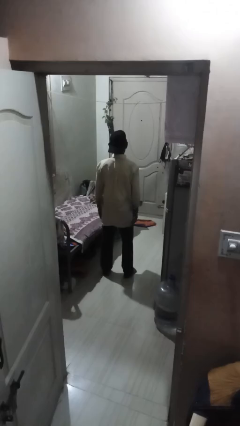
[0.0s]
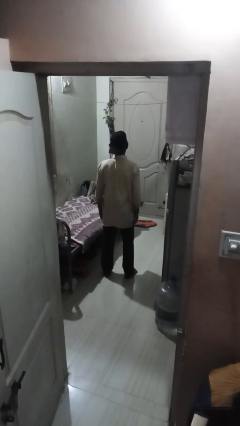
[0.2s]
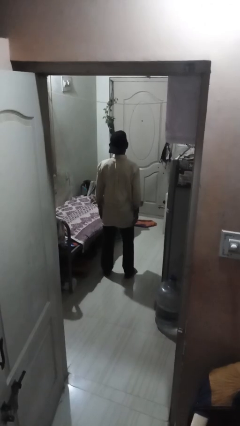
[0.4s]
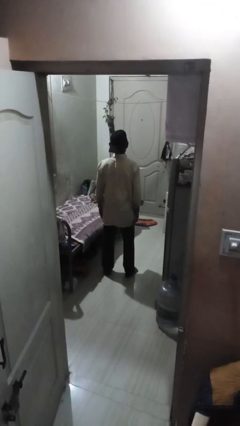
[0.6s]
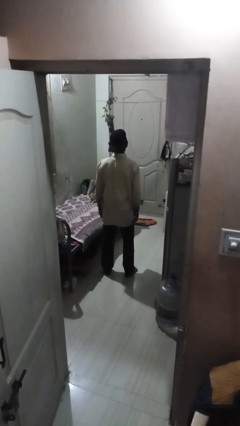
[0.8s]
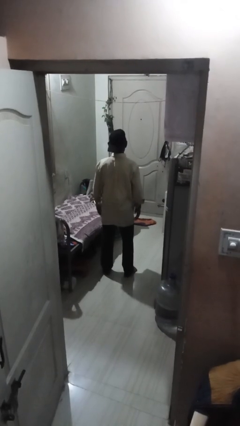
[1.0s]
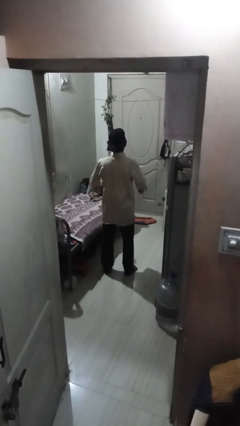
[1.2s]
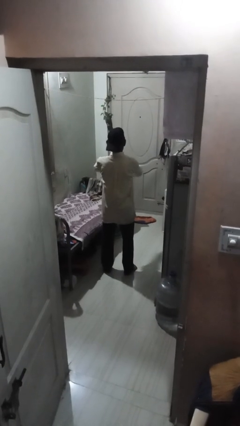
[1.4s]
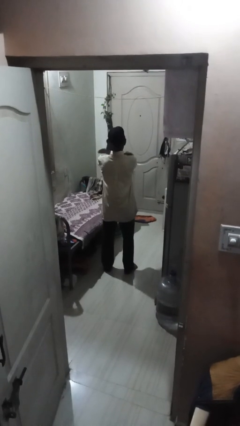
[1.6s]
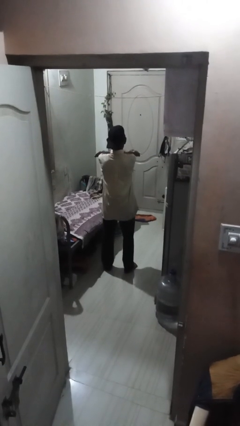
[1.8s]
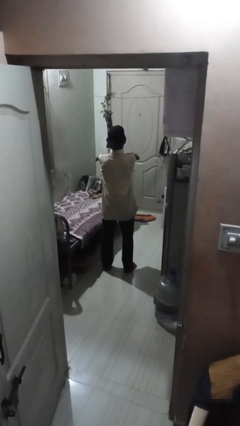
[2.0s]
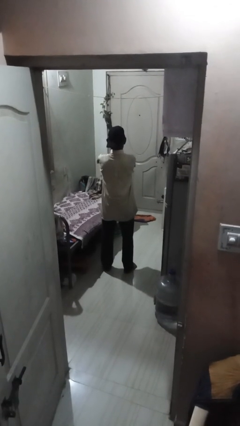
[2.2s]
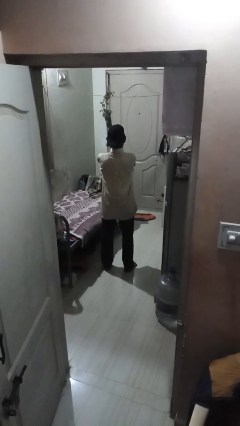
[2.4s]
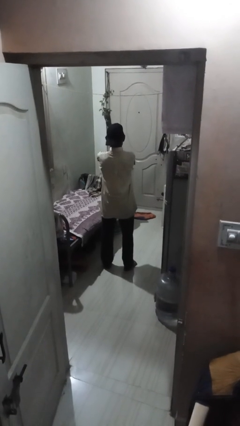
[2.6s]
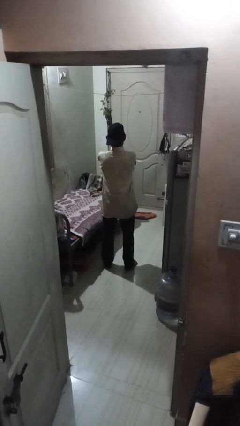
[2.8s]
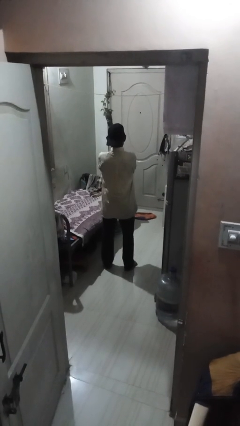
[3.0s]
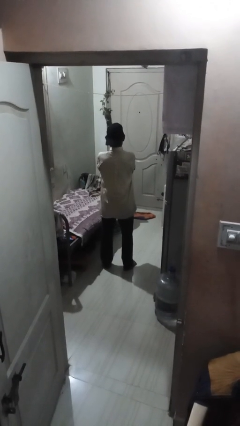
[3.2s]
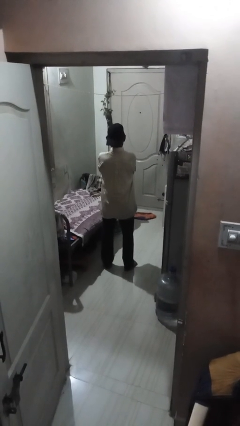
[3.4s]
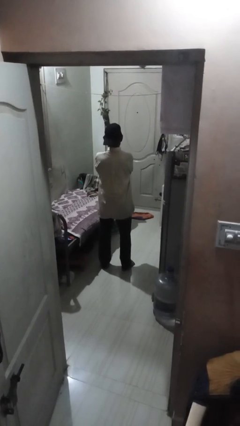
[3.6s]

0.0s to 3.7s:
person crosses arms

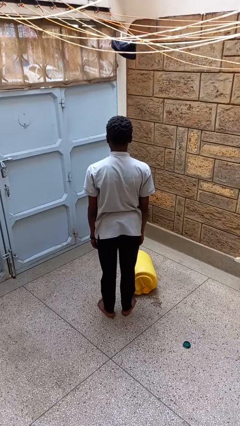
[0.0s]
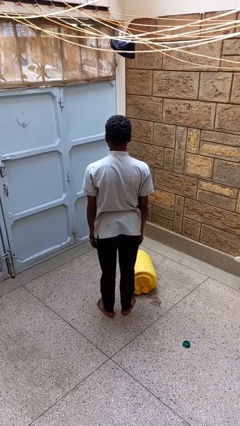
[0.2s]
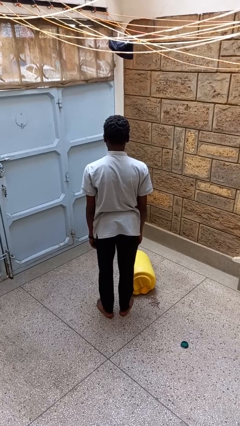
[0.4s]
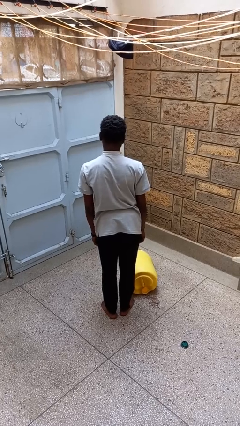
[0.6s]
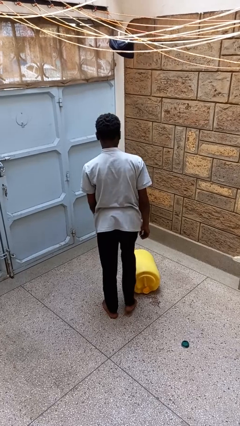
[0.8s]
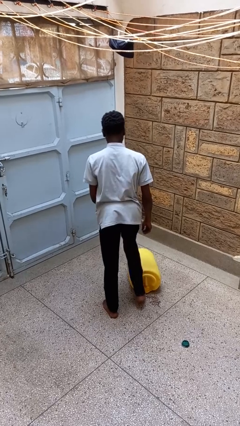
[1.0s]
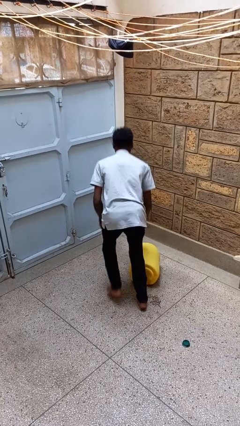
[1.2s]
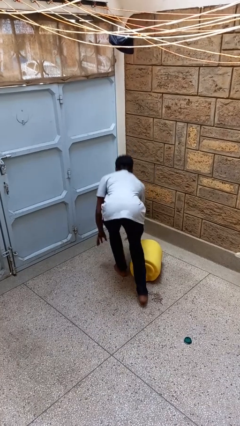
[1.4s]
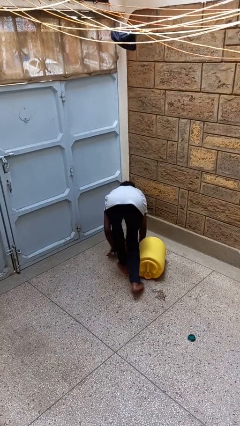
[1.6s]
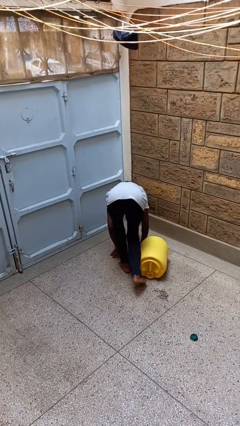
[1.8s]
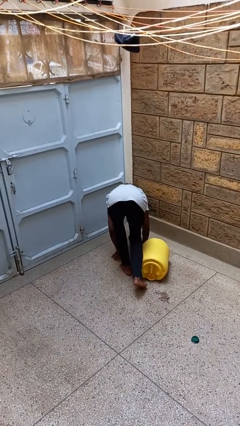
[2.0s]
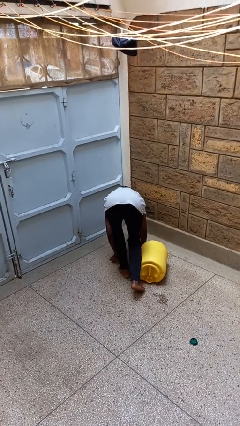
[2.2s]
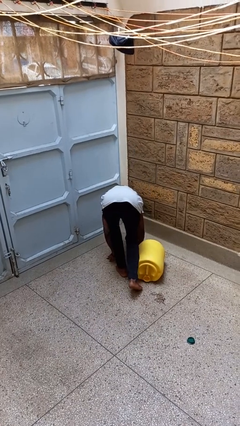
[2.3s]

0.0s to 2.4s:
person trips on object on floor

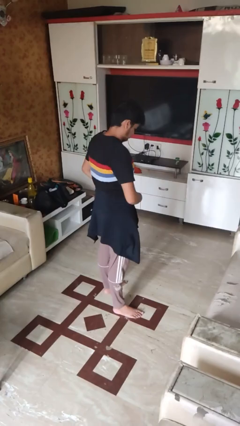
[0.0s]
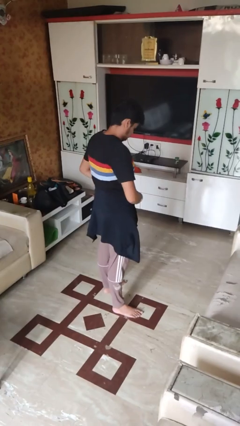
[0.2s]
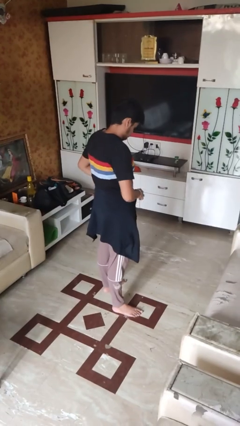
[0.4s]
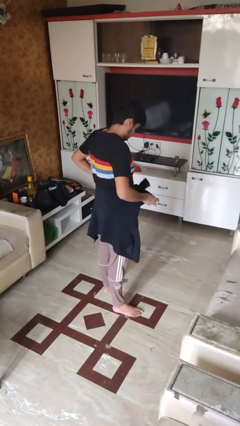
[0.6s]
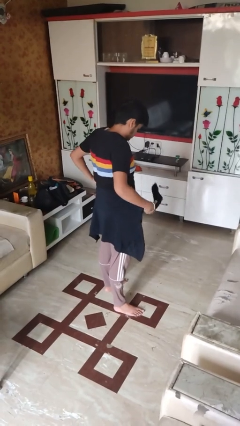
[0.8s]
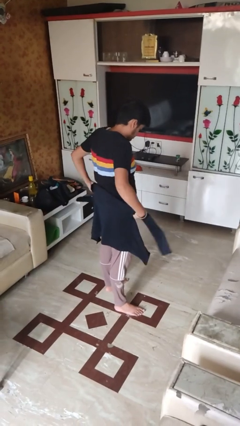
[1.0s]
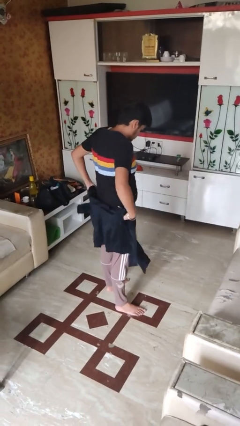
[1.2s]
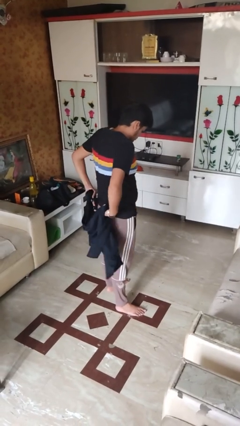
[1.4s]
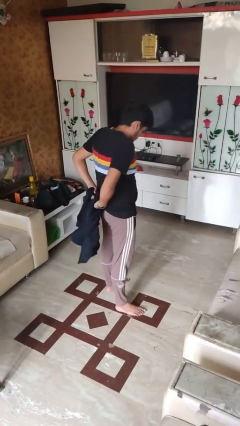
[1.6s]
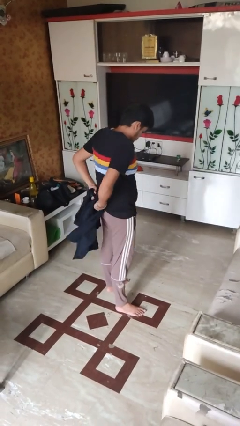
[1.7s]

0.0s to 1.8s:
person unties jacket around waist

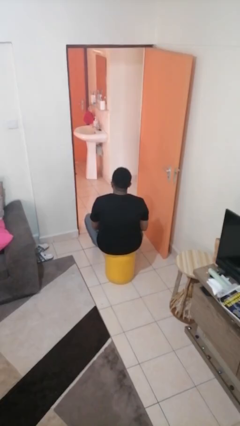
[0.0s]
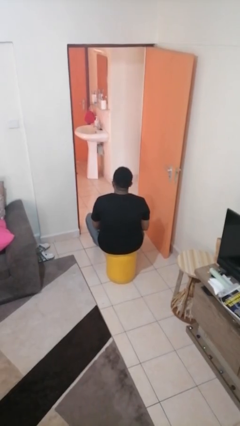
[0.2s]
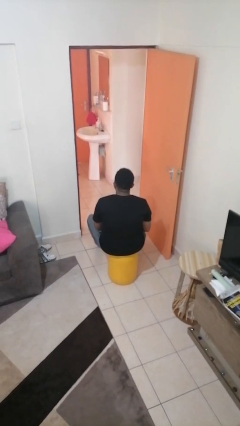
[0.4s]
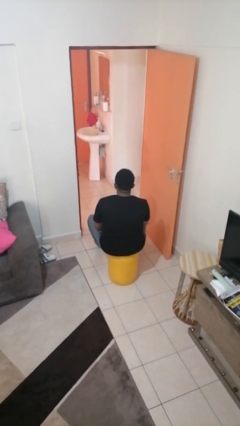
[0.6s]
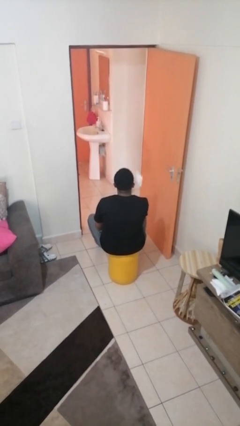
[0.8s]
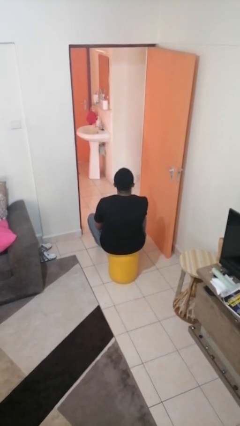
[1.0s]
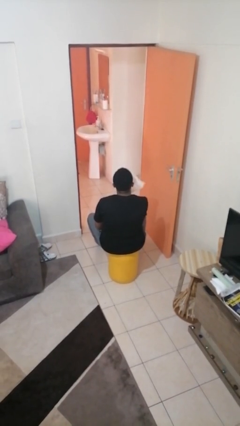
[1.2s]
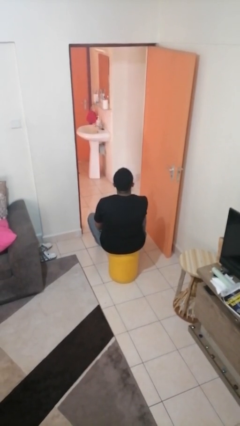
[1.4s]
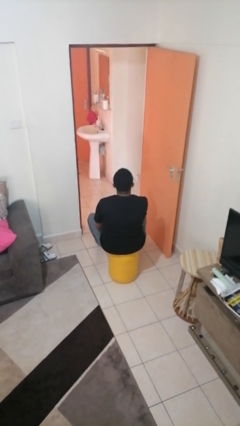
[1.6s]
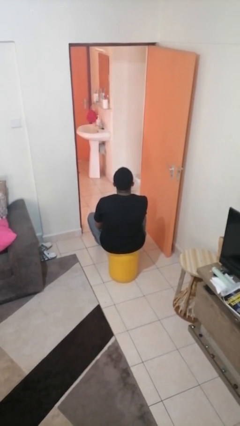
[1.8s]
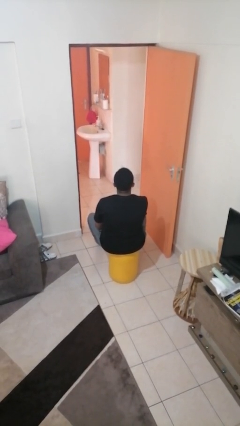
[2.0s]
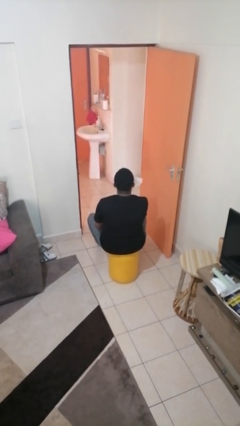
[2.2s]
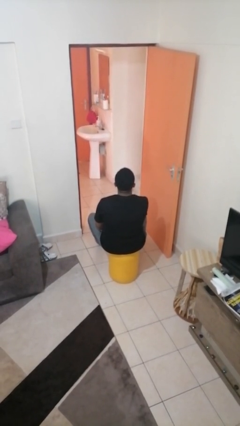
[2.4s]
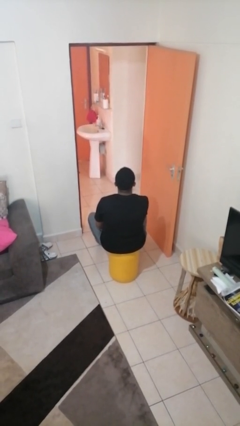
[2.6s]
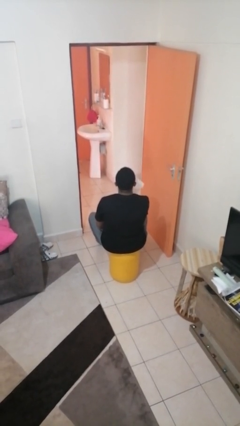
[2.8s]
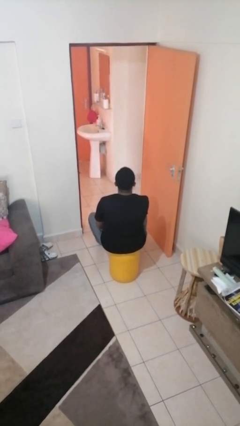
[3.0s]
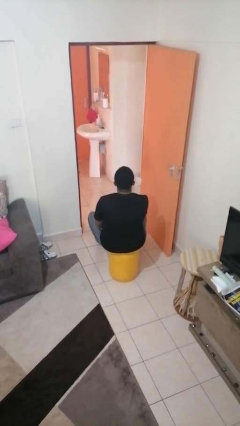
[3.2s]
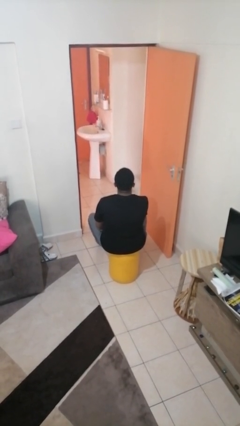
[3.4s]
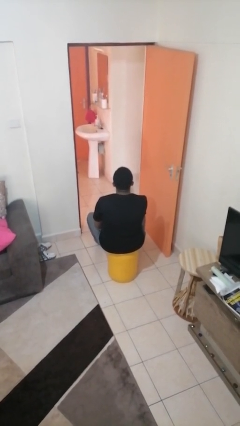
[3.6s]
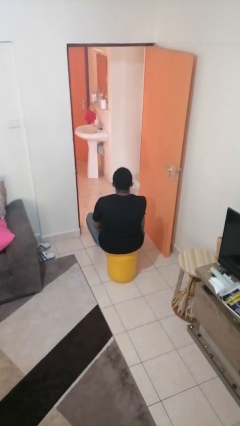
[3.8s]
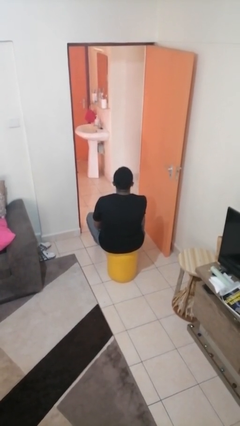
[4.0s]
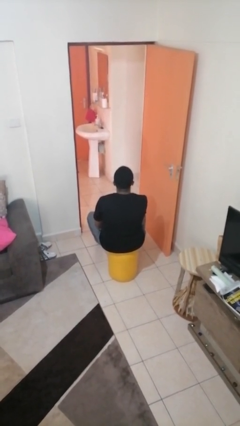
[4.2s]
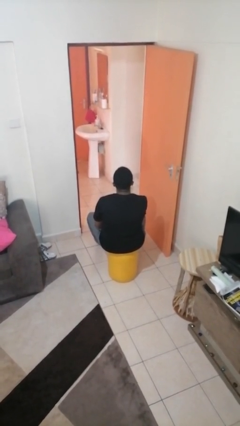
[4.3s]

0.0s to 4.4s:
person wipes mouth with napkin

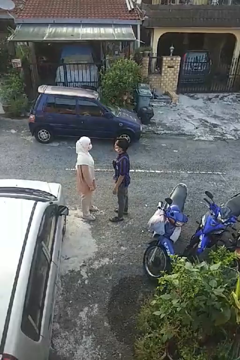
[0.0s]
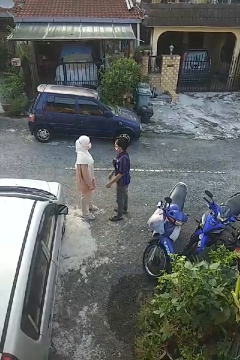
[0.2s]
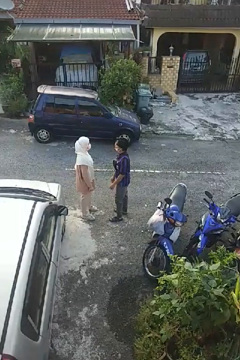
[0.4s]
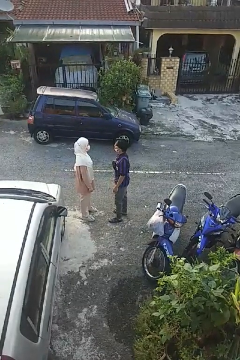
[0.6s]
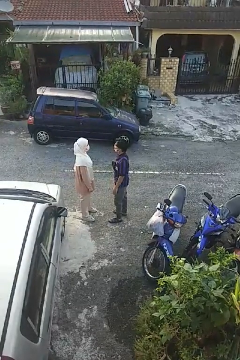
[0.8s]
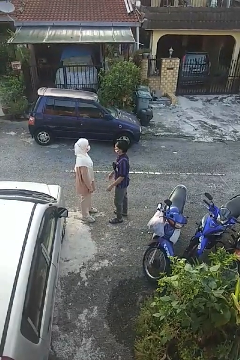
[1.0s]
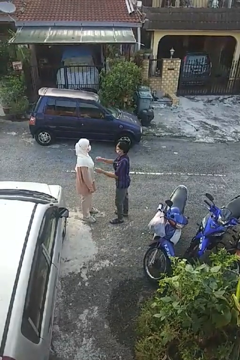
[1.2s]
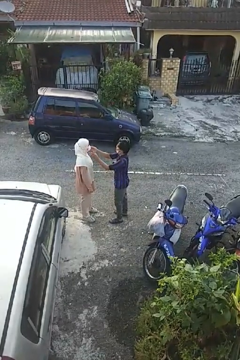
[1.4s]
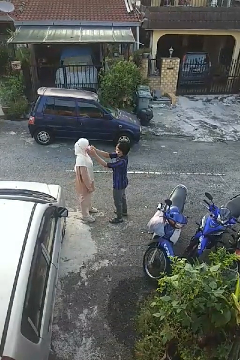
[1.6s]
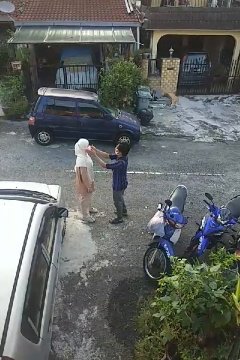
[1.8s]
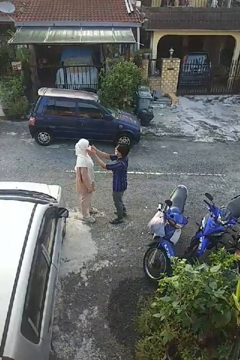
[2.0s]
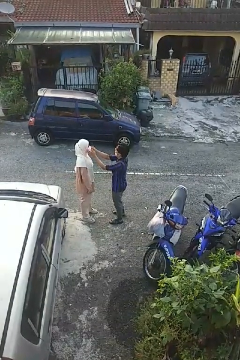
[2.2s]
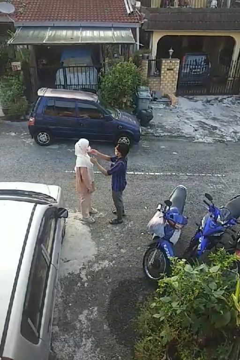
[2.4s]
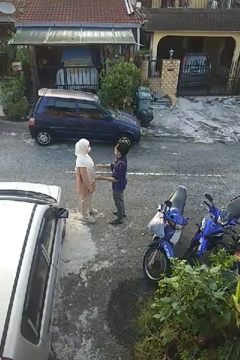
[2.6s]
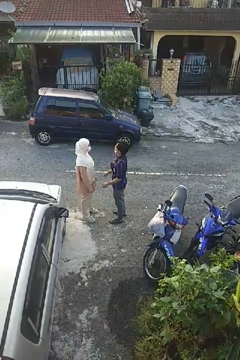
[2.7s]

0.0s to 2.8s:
person touches face of person

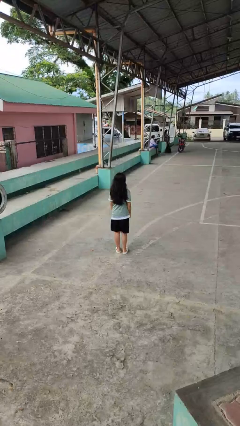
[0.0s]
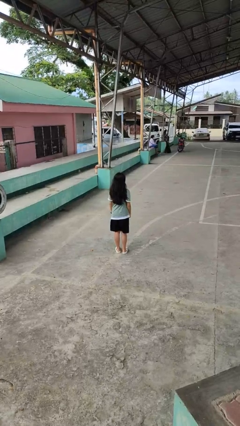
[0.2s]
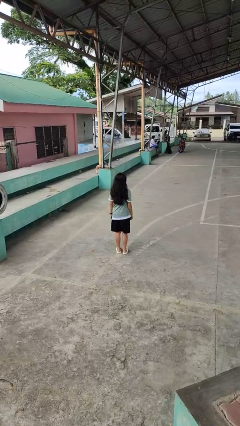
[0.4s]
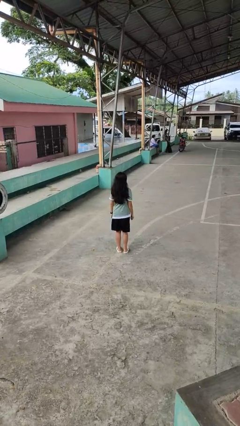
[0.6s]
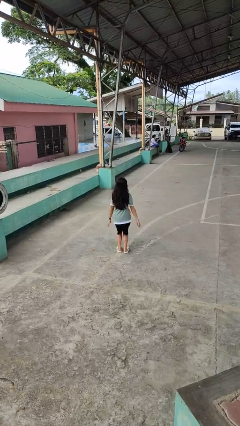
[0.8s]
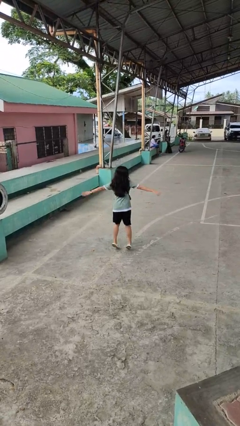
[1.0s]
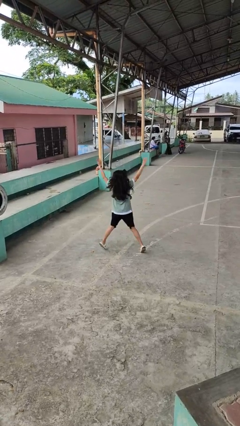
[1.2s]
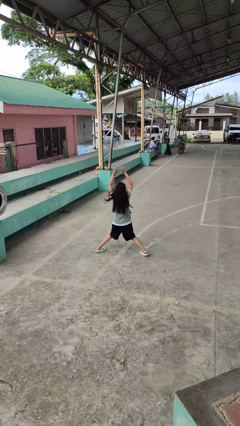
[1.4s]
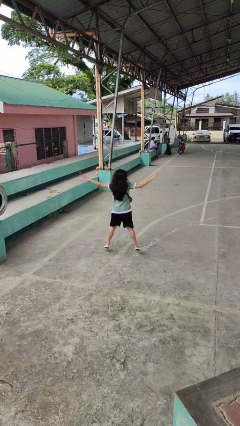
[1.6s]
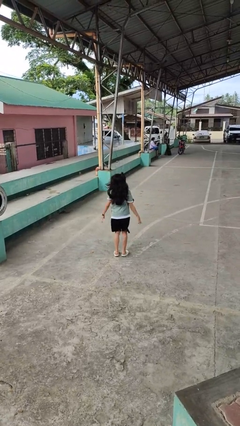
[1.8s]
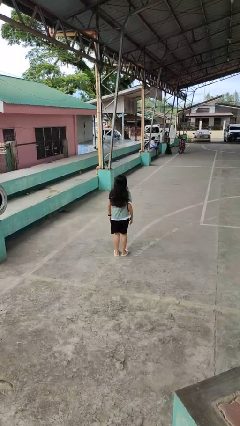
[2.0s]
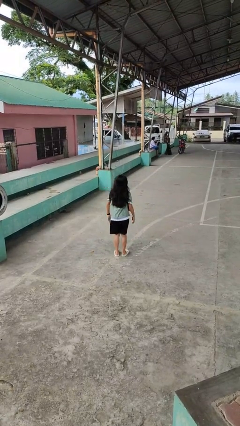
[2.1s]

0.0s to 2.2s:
person exercises with jumping jacks

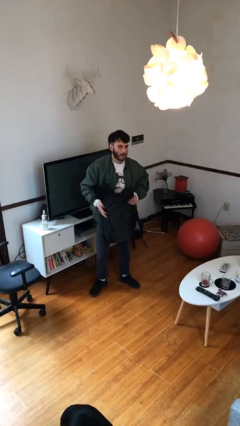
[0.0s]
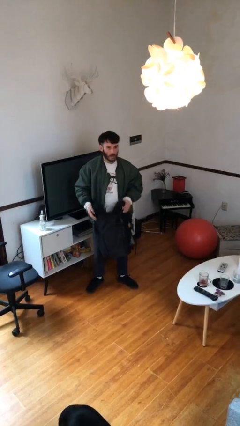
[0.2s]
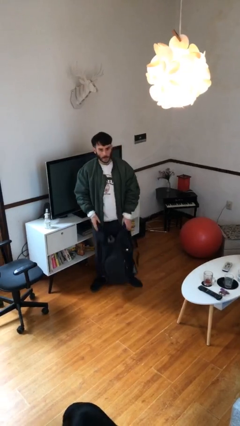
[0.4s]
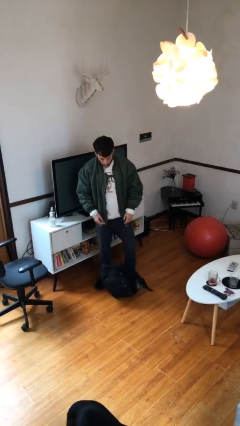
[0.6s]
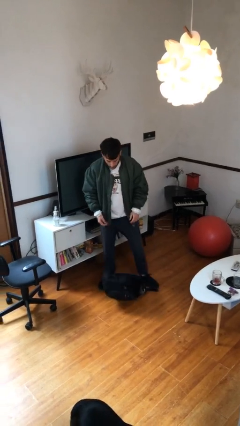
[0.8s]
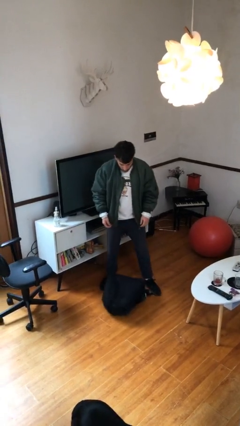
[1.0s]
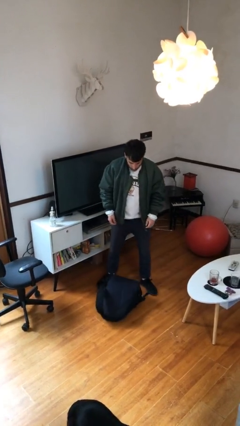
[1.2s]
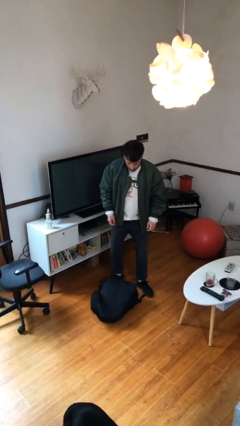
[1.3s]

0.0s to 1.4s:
person drops object
